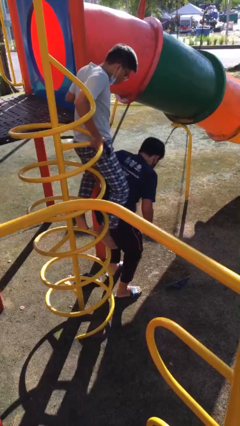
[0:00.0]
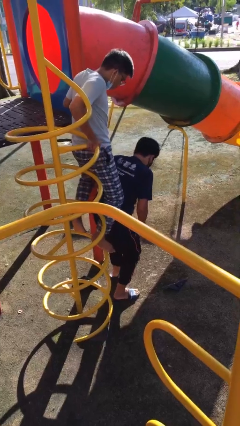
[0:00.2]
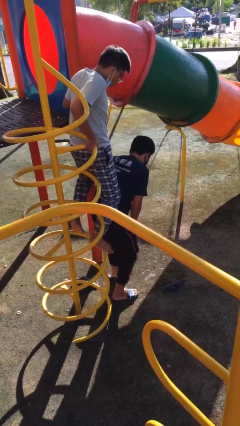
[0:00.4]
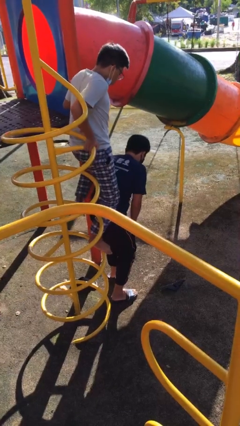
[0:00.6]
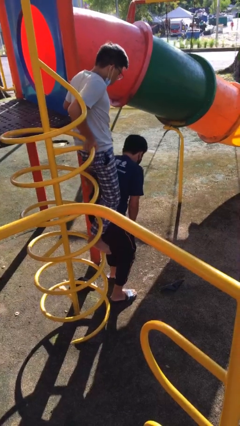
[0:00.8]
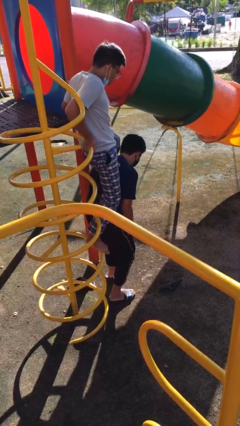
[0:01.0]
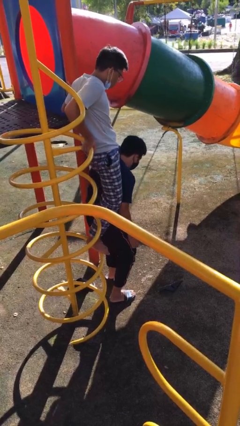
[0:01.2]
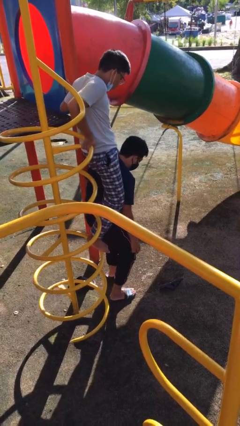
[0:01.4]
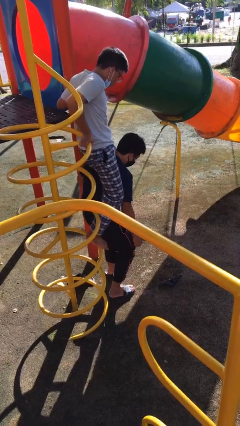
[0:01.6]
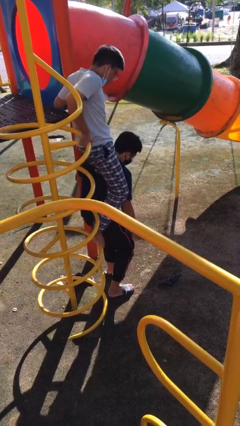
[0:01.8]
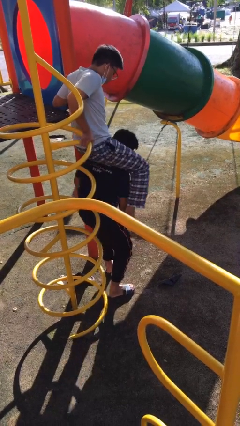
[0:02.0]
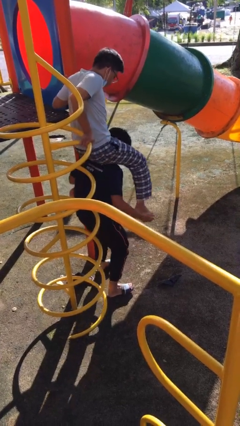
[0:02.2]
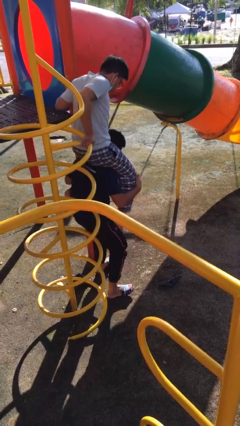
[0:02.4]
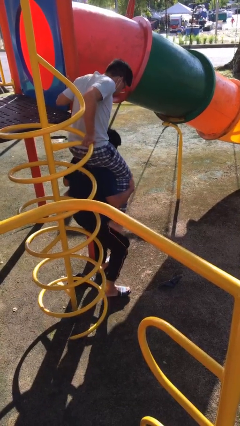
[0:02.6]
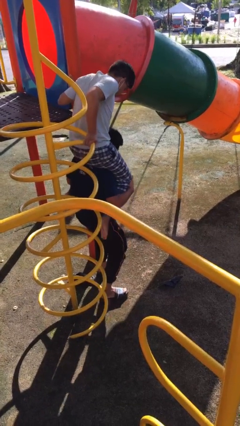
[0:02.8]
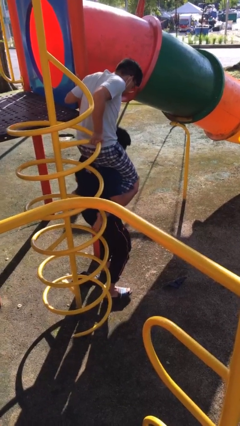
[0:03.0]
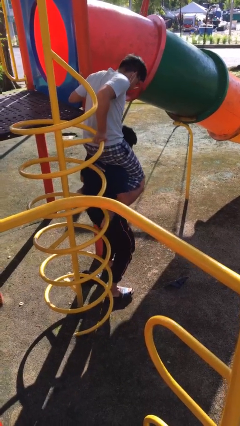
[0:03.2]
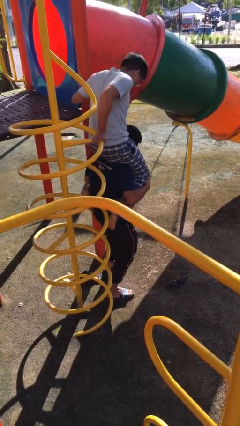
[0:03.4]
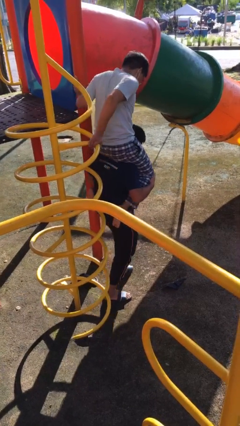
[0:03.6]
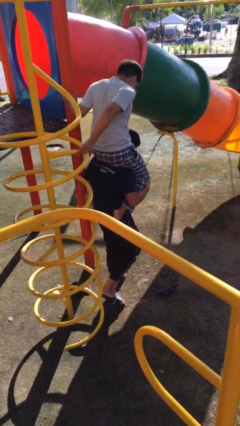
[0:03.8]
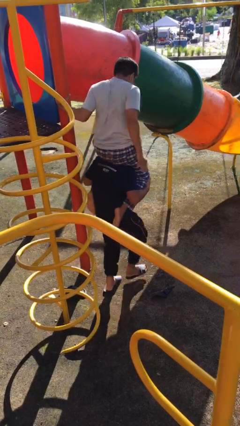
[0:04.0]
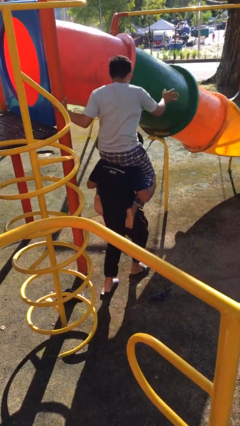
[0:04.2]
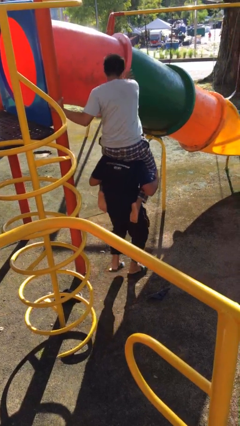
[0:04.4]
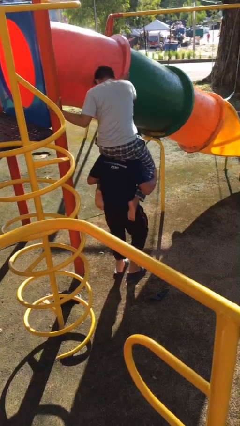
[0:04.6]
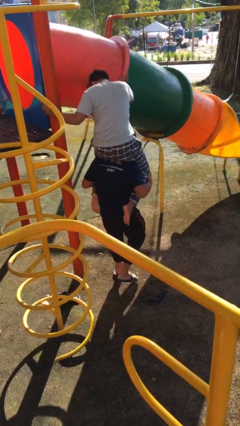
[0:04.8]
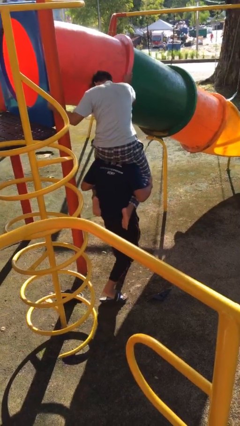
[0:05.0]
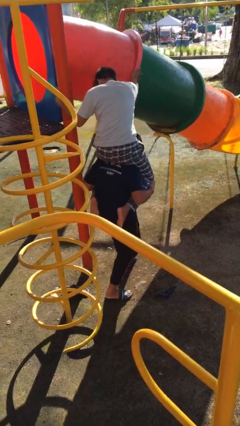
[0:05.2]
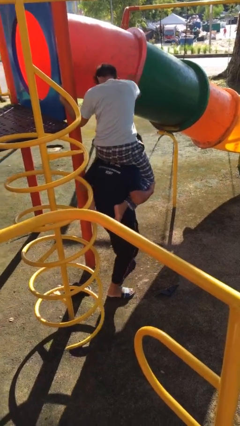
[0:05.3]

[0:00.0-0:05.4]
person carries person on shoulders

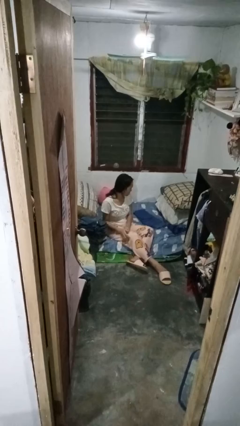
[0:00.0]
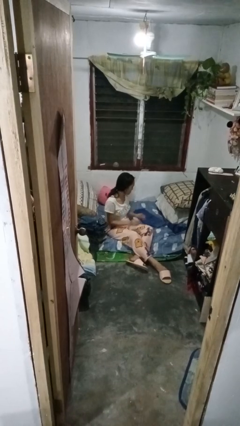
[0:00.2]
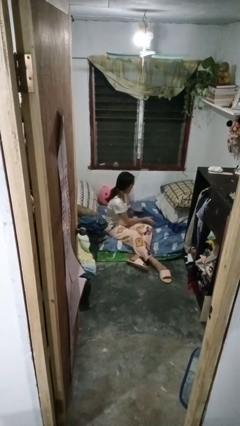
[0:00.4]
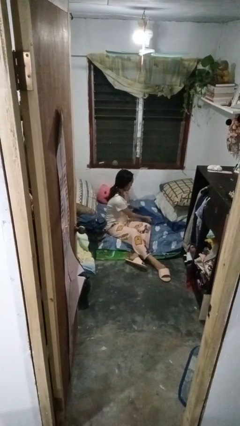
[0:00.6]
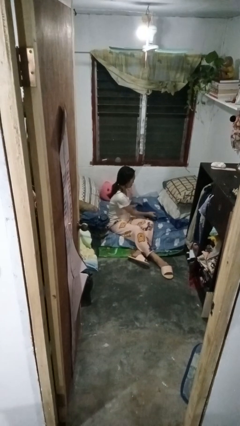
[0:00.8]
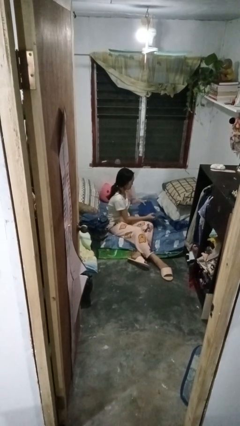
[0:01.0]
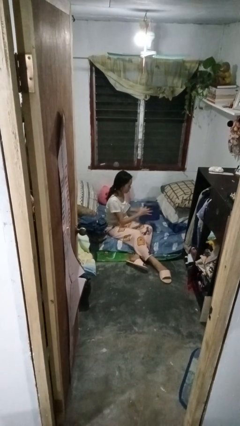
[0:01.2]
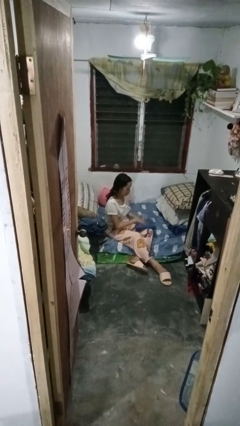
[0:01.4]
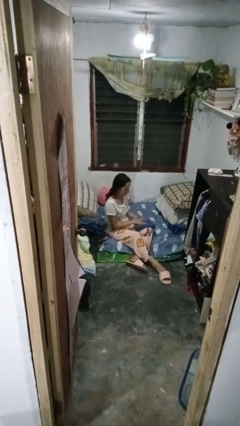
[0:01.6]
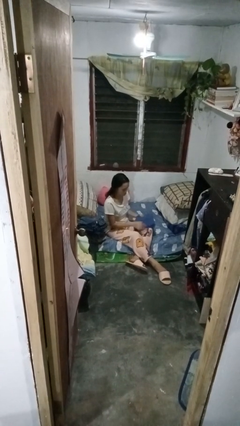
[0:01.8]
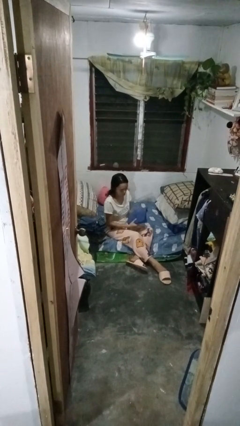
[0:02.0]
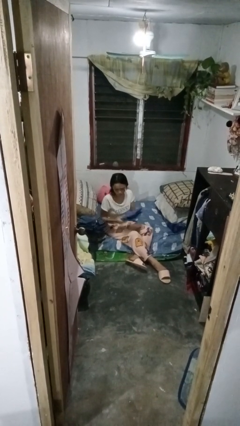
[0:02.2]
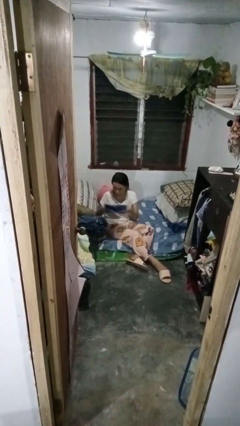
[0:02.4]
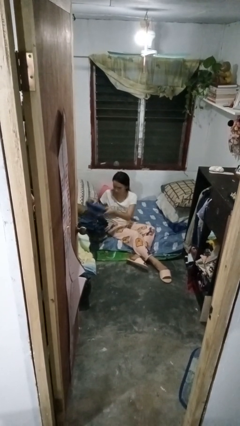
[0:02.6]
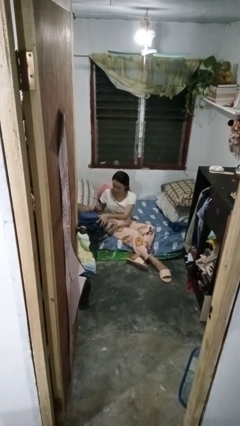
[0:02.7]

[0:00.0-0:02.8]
person folds pants

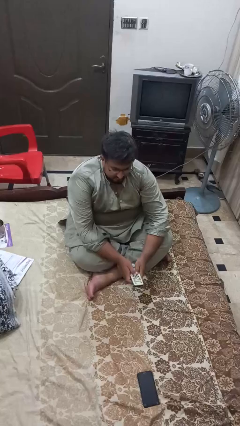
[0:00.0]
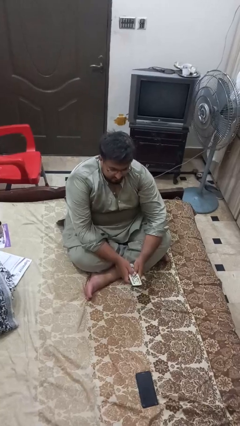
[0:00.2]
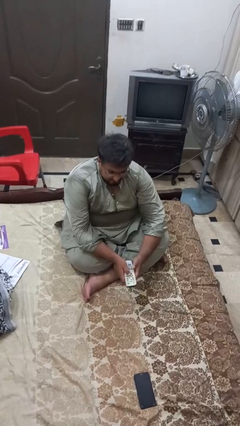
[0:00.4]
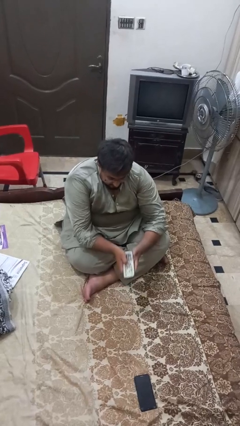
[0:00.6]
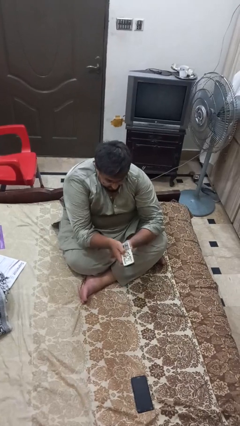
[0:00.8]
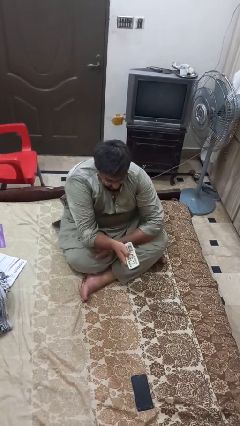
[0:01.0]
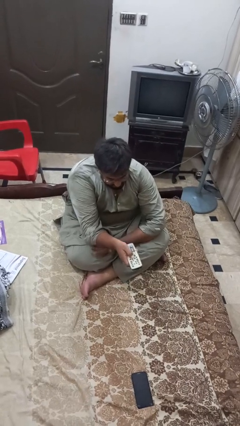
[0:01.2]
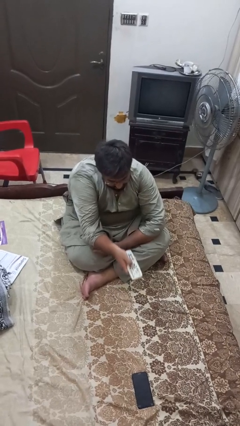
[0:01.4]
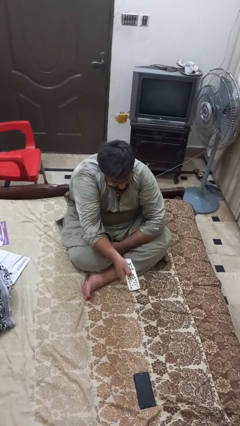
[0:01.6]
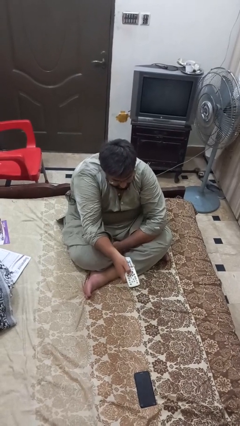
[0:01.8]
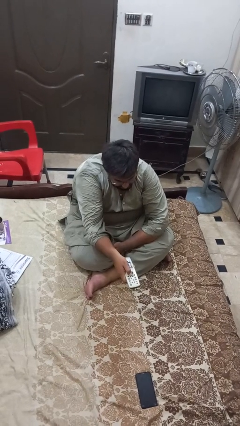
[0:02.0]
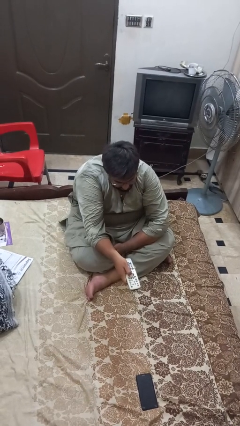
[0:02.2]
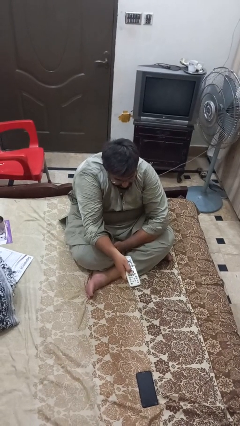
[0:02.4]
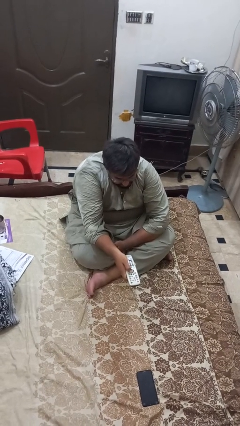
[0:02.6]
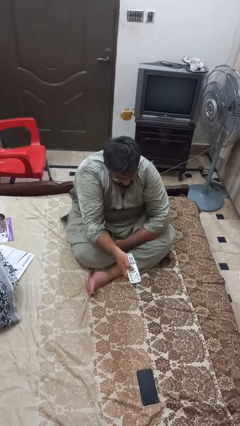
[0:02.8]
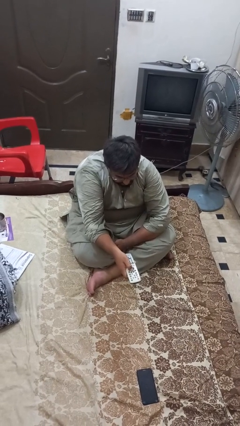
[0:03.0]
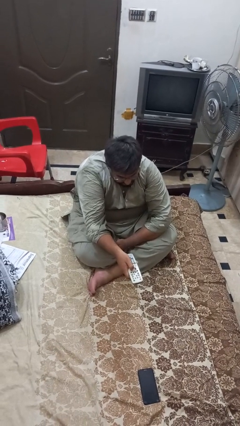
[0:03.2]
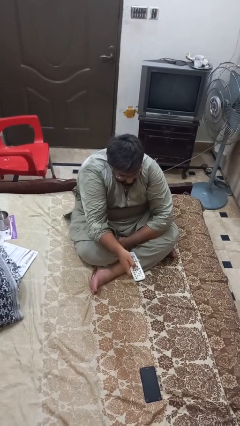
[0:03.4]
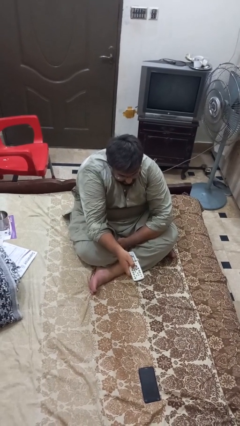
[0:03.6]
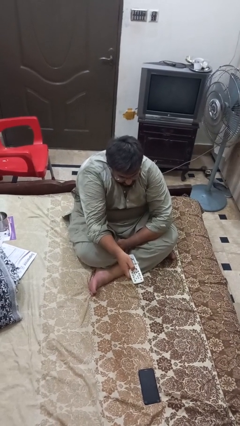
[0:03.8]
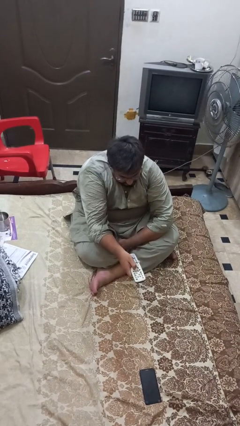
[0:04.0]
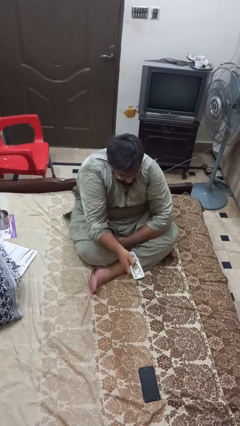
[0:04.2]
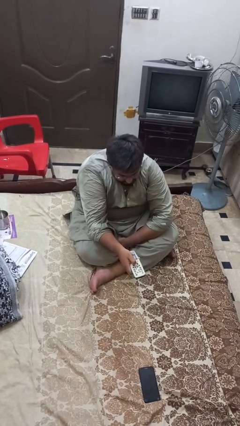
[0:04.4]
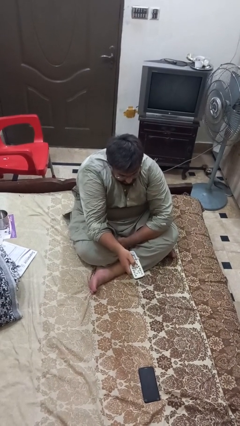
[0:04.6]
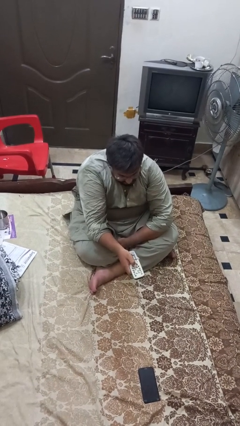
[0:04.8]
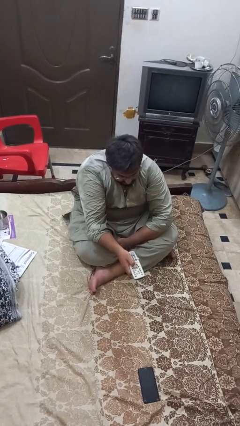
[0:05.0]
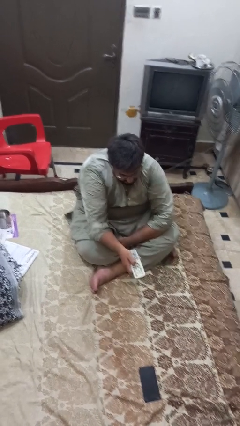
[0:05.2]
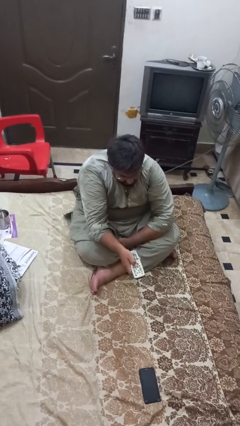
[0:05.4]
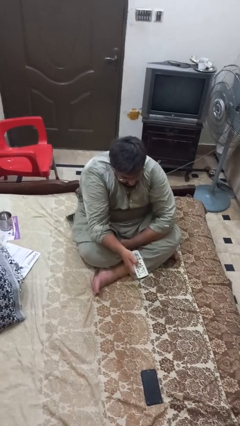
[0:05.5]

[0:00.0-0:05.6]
person uses television remote

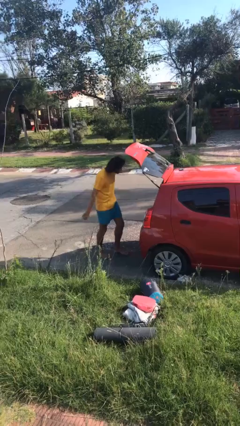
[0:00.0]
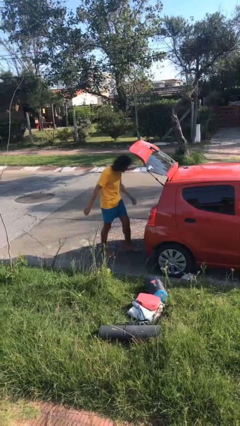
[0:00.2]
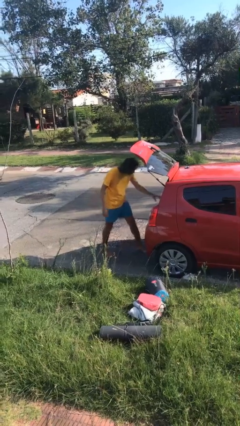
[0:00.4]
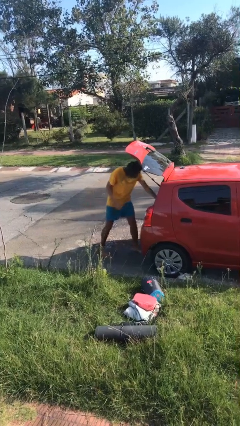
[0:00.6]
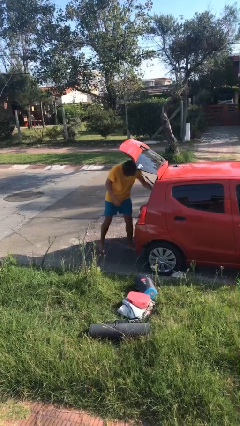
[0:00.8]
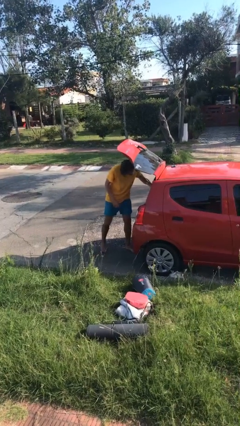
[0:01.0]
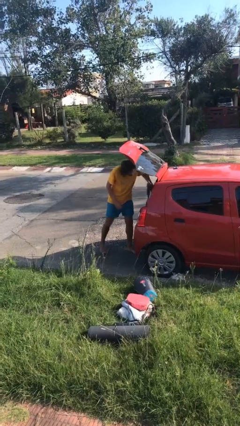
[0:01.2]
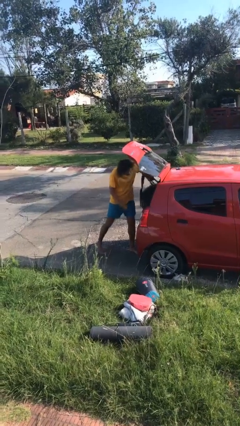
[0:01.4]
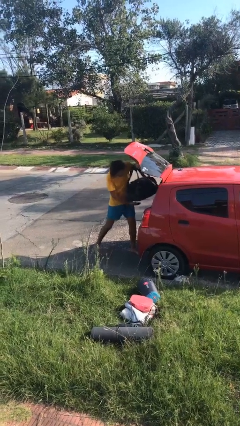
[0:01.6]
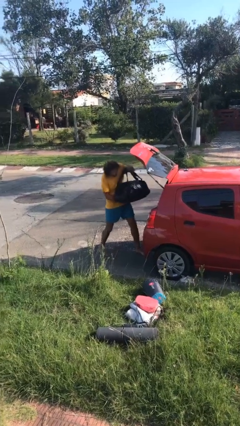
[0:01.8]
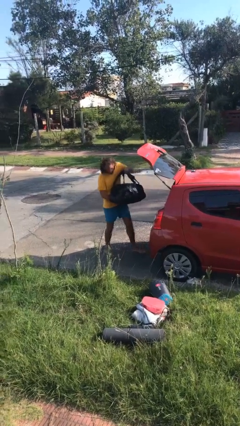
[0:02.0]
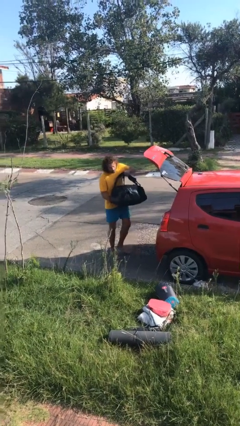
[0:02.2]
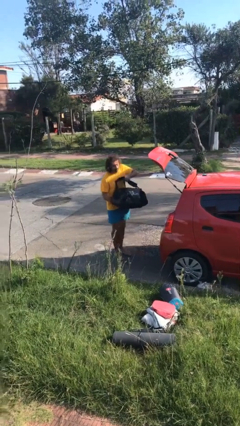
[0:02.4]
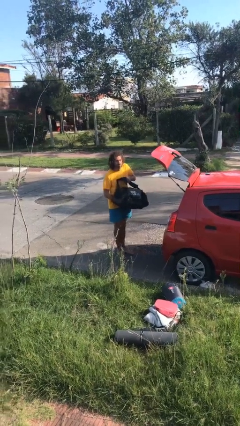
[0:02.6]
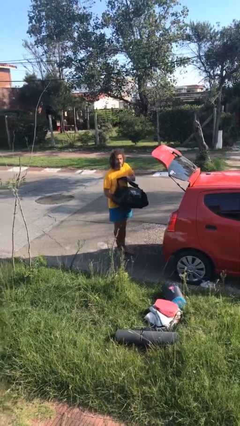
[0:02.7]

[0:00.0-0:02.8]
person unloads car

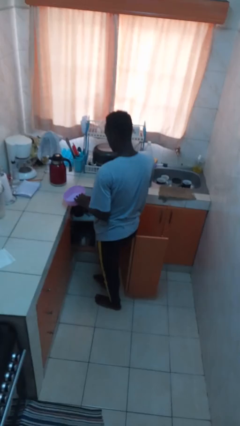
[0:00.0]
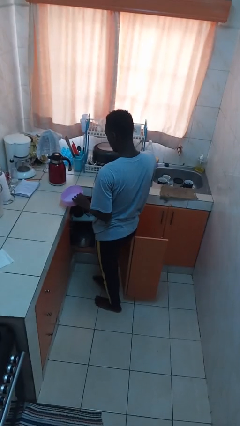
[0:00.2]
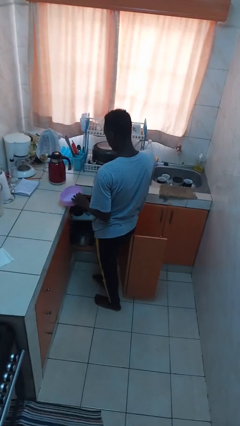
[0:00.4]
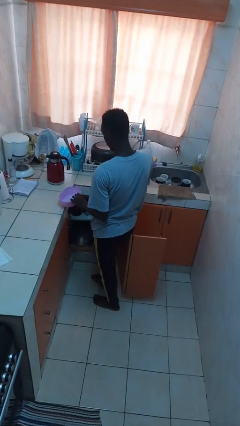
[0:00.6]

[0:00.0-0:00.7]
person takes object from cabinet

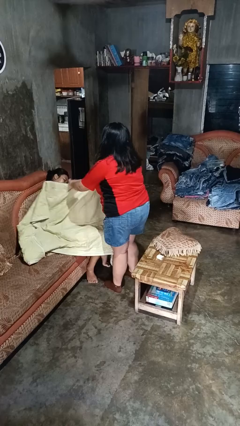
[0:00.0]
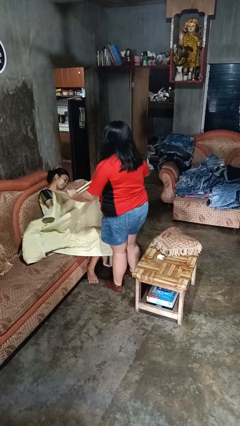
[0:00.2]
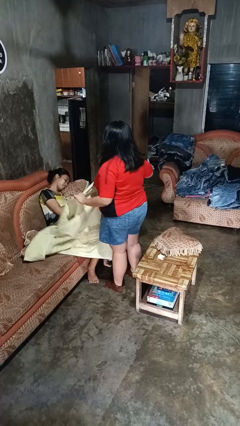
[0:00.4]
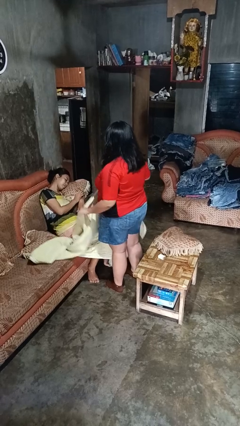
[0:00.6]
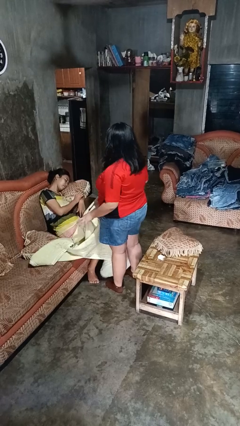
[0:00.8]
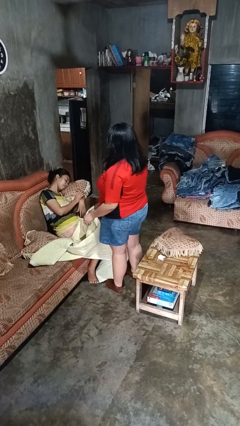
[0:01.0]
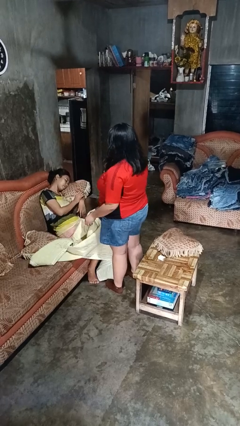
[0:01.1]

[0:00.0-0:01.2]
person uncovers friend with blanket
